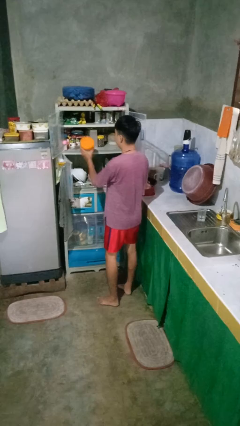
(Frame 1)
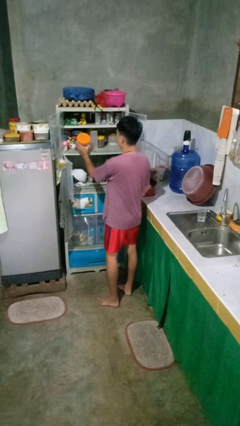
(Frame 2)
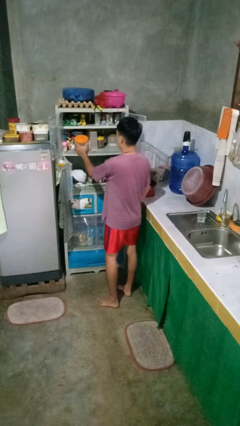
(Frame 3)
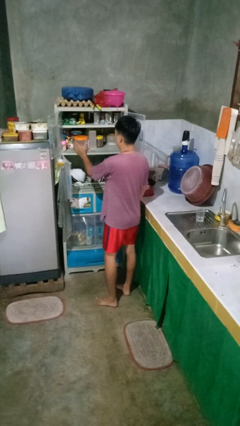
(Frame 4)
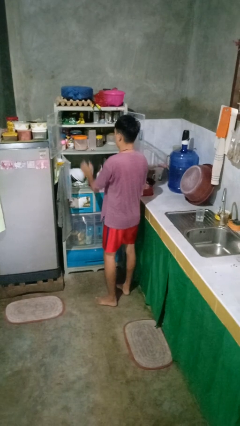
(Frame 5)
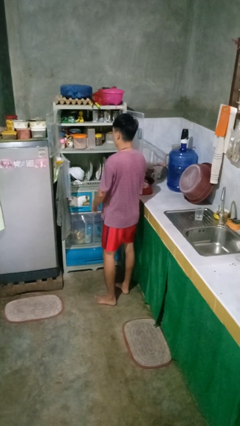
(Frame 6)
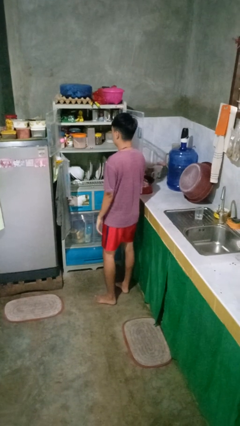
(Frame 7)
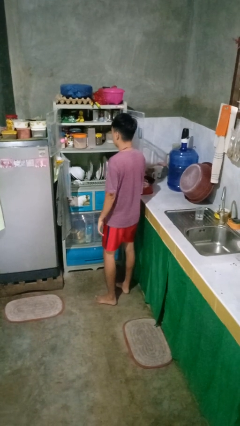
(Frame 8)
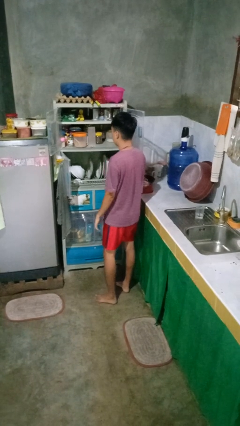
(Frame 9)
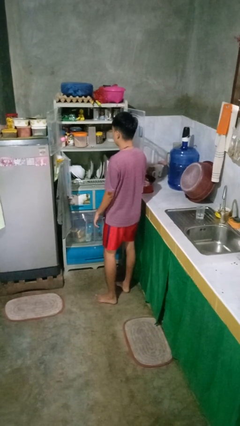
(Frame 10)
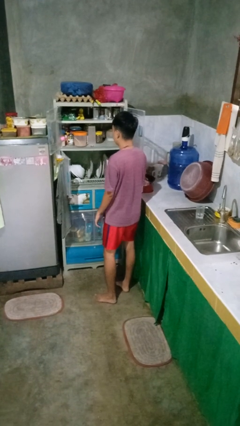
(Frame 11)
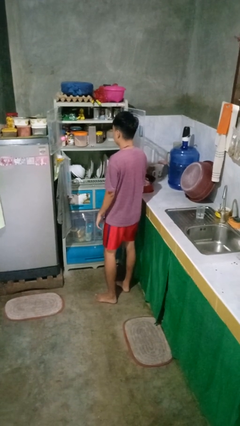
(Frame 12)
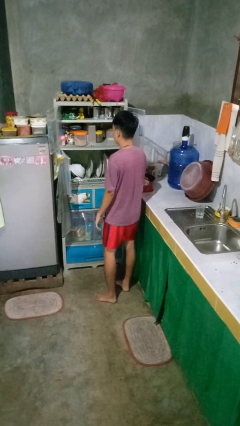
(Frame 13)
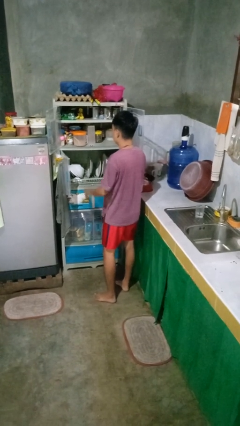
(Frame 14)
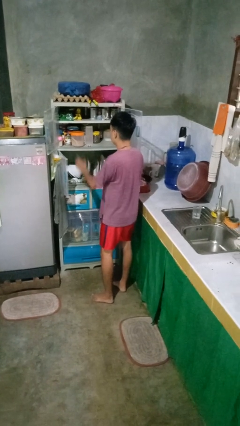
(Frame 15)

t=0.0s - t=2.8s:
person puts object in cabinet

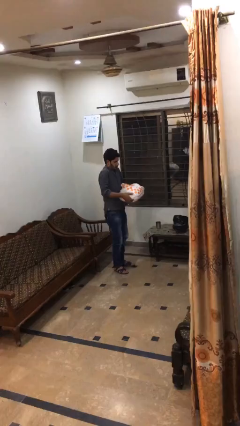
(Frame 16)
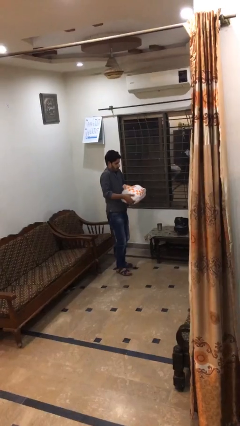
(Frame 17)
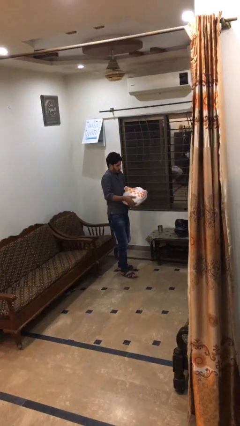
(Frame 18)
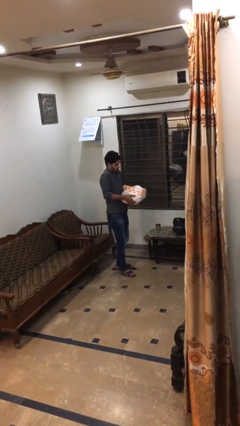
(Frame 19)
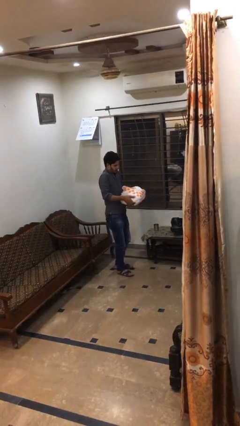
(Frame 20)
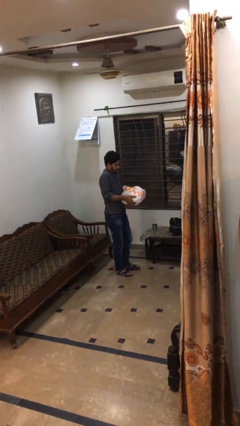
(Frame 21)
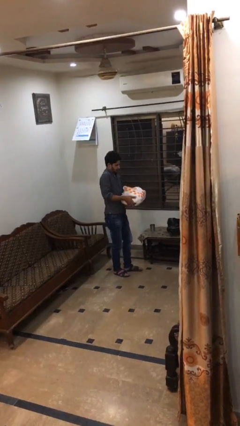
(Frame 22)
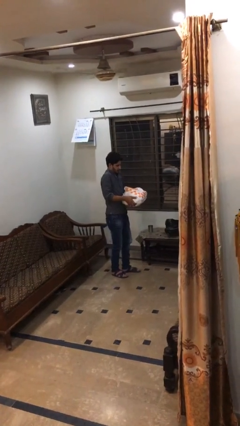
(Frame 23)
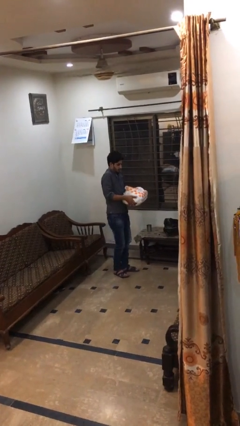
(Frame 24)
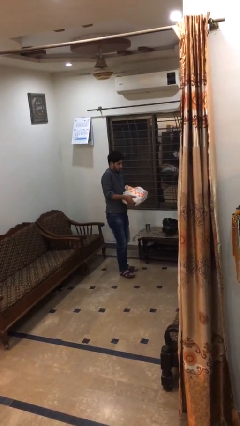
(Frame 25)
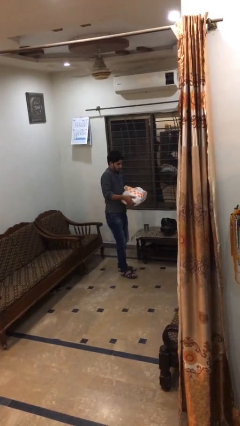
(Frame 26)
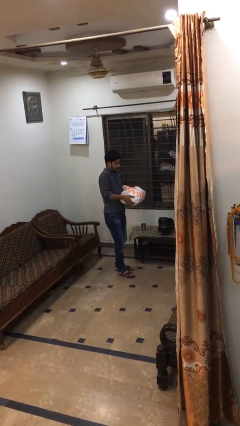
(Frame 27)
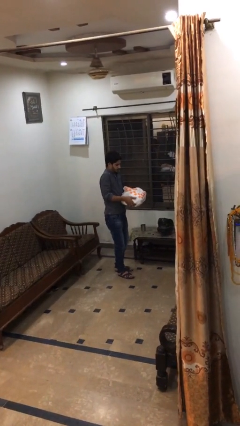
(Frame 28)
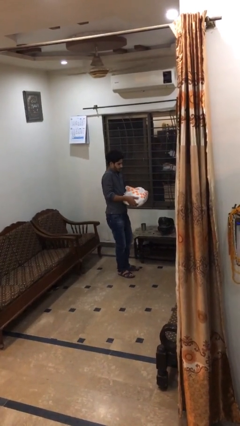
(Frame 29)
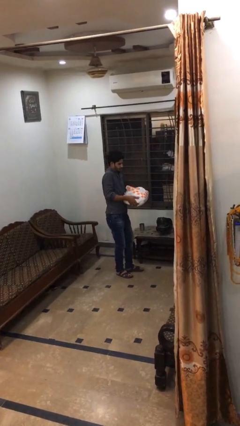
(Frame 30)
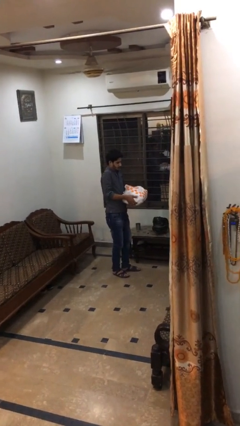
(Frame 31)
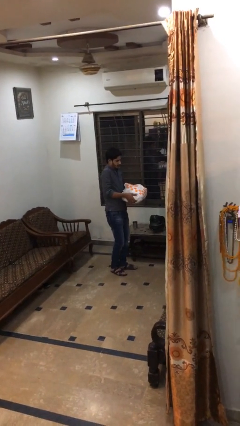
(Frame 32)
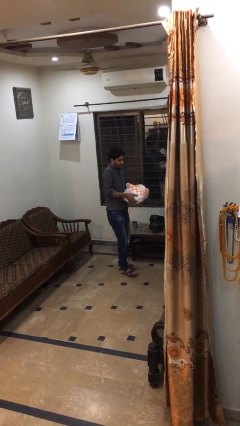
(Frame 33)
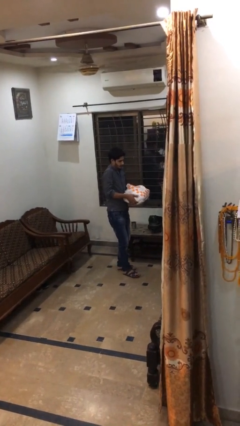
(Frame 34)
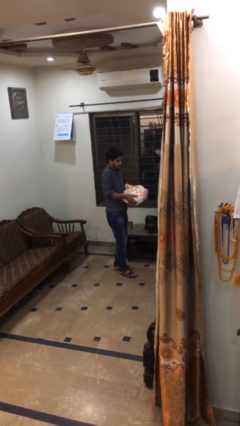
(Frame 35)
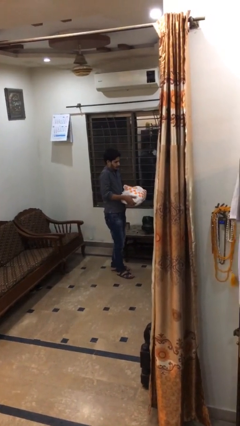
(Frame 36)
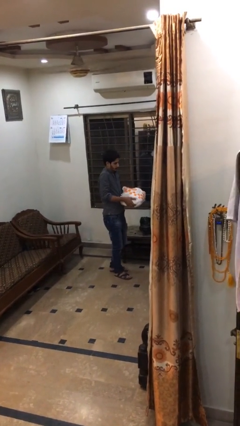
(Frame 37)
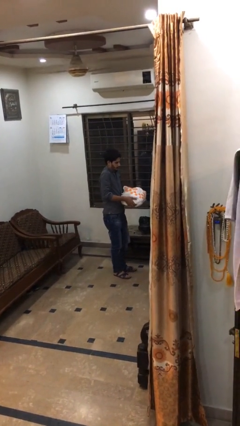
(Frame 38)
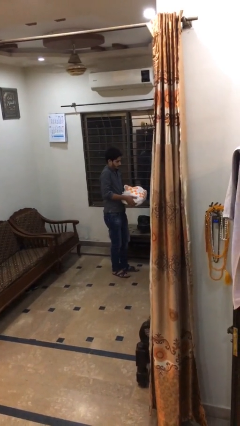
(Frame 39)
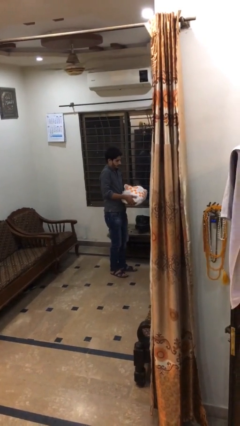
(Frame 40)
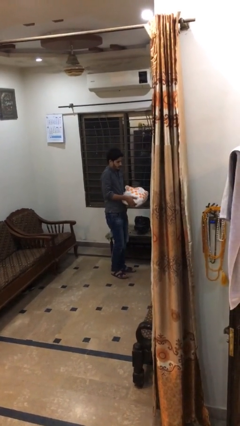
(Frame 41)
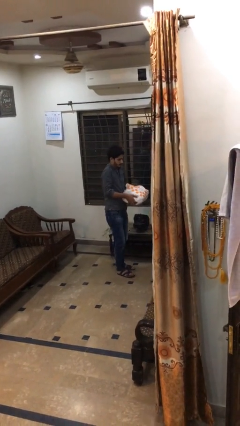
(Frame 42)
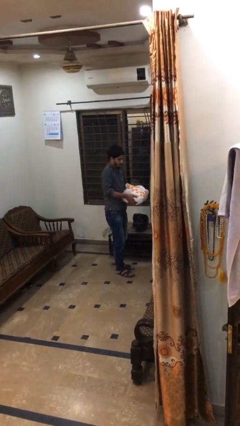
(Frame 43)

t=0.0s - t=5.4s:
person carries heavy object

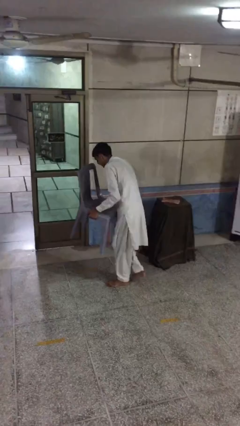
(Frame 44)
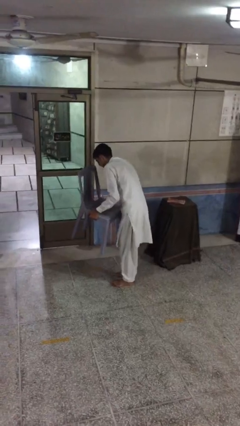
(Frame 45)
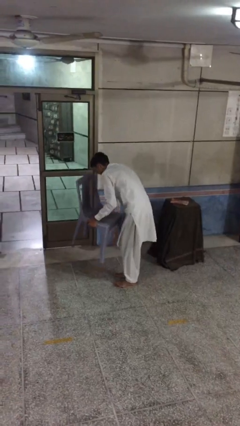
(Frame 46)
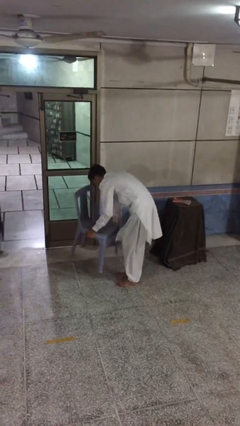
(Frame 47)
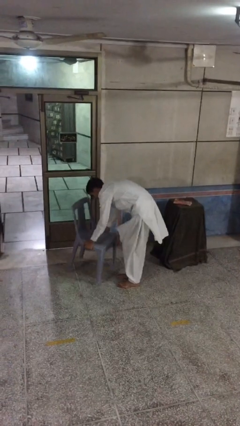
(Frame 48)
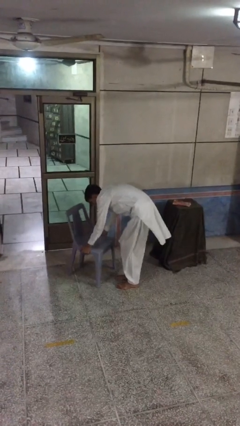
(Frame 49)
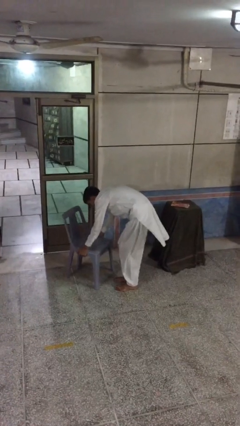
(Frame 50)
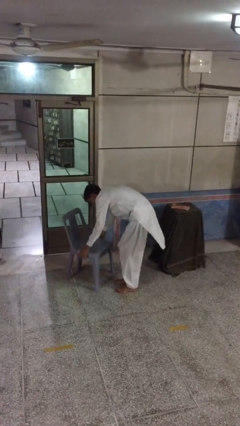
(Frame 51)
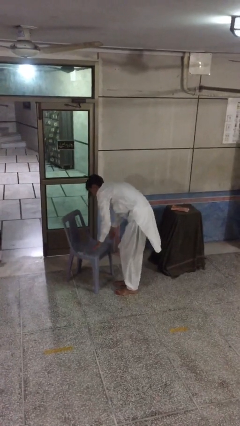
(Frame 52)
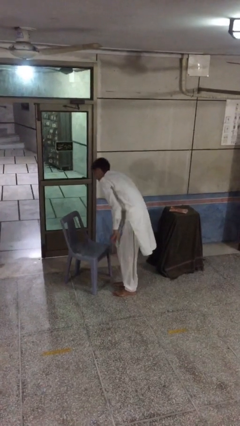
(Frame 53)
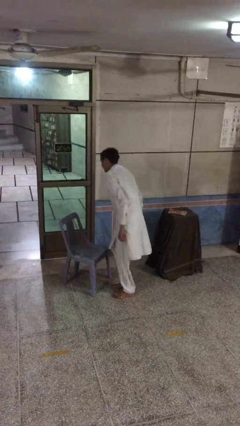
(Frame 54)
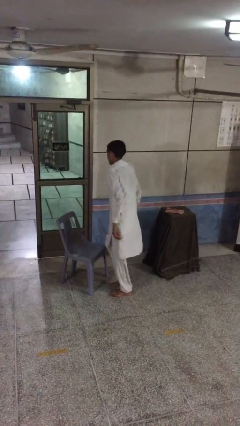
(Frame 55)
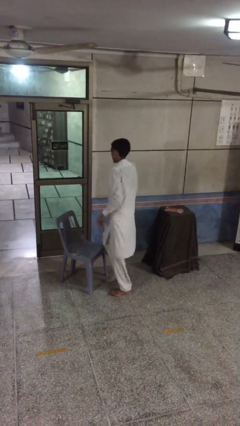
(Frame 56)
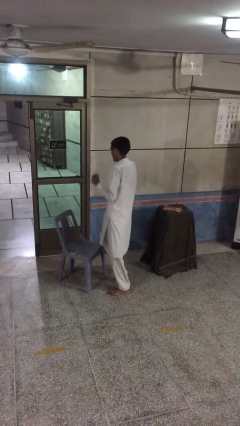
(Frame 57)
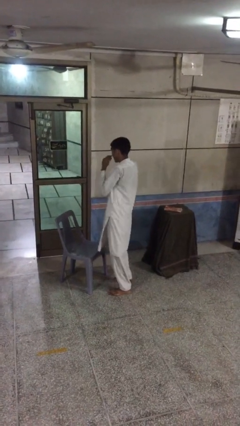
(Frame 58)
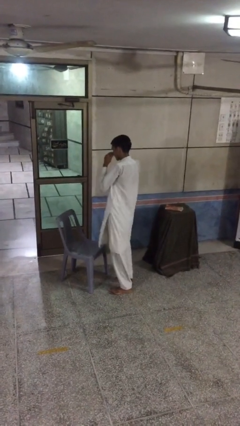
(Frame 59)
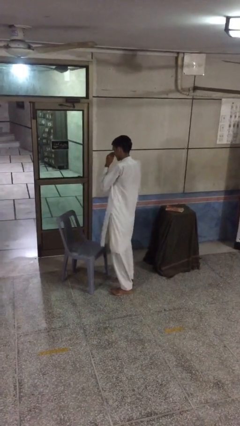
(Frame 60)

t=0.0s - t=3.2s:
person puts down object on floor

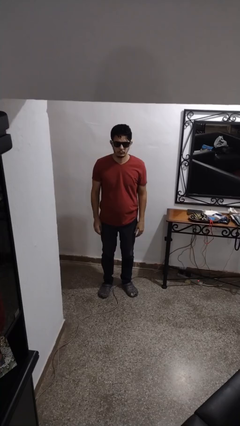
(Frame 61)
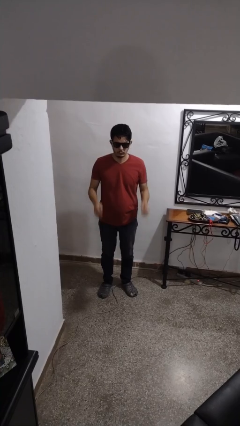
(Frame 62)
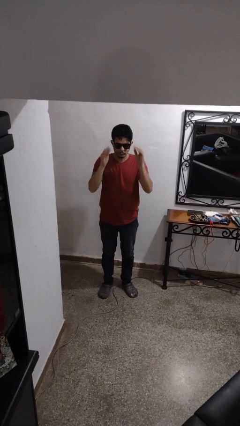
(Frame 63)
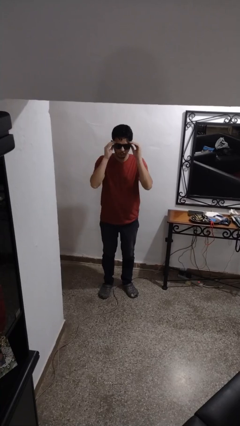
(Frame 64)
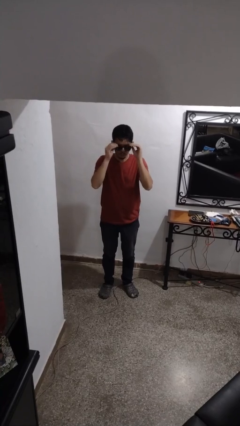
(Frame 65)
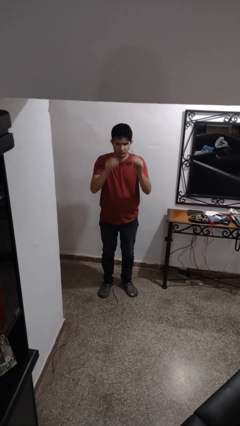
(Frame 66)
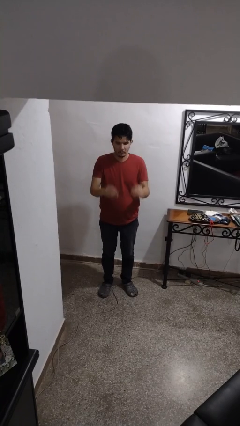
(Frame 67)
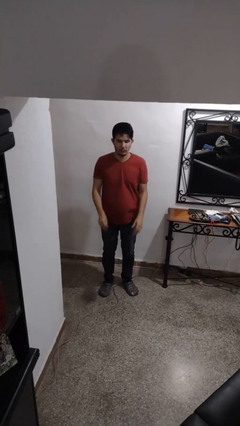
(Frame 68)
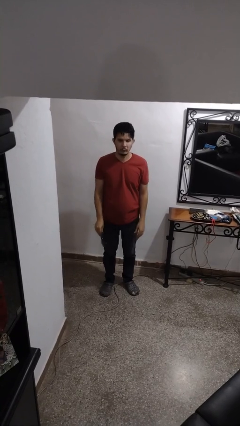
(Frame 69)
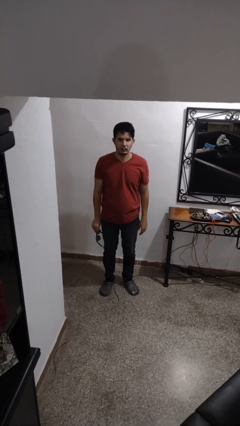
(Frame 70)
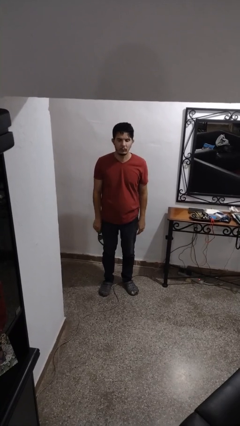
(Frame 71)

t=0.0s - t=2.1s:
person takes off sunglasses

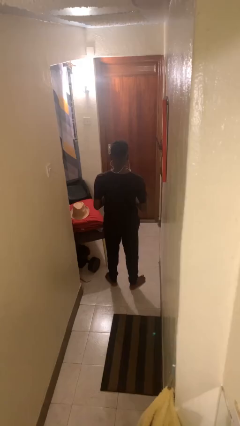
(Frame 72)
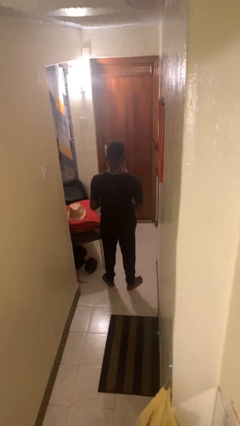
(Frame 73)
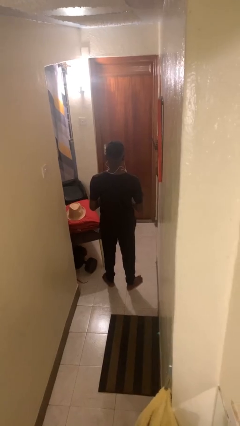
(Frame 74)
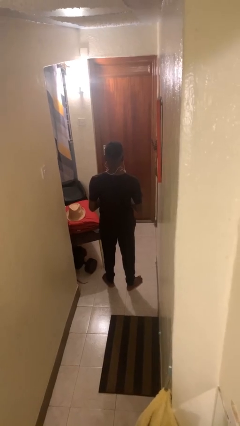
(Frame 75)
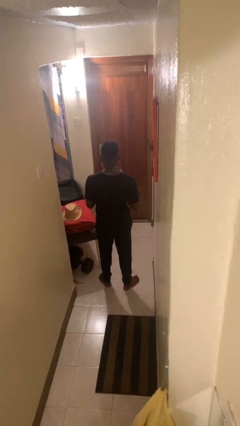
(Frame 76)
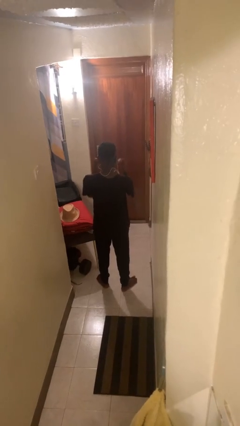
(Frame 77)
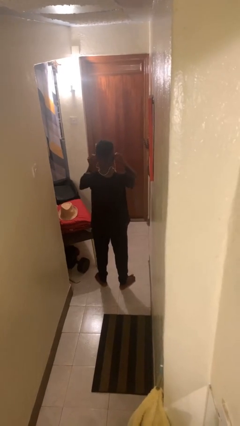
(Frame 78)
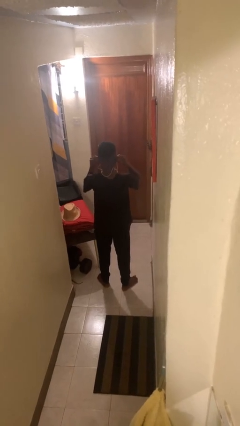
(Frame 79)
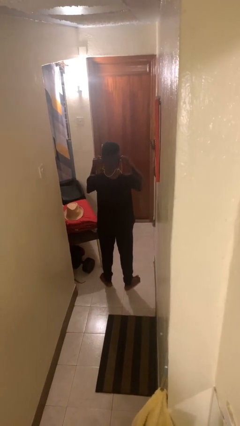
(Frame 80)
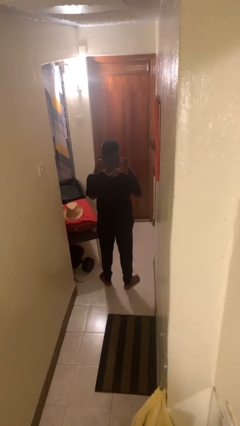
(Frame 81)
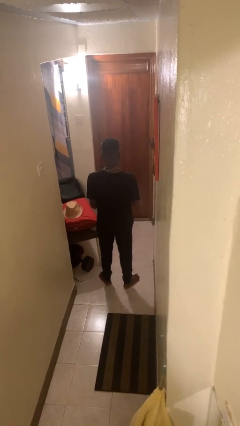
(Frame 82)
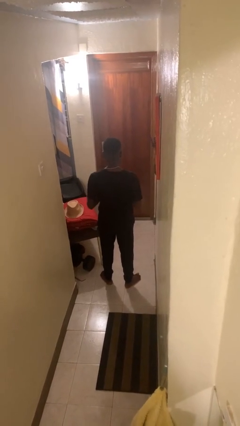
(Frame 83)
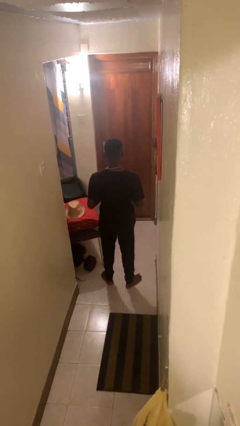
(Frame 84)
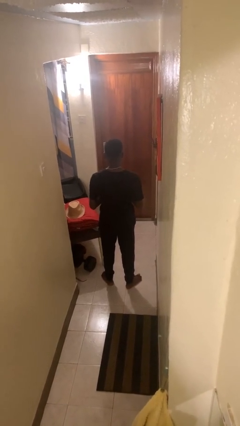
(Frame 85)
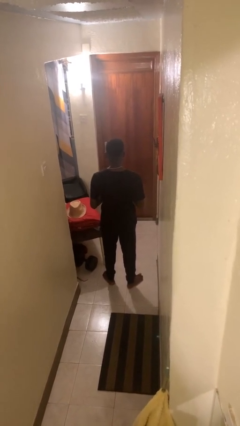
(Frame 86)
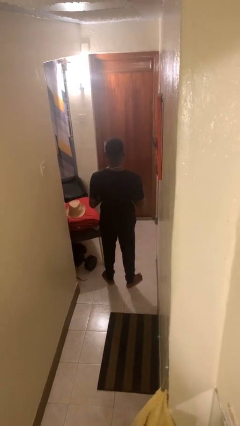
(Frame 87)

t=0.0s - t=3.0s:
person takes off headphones

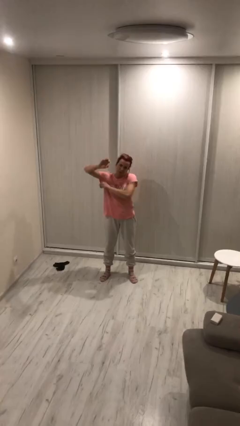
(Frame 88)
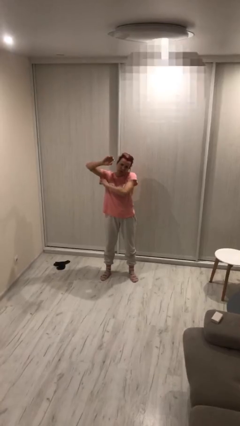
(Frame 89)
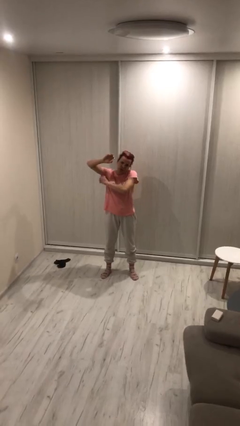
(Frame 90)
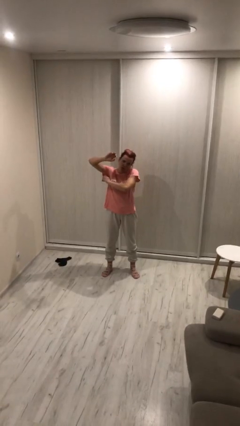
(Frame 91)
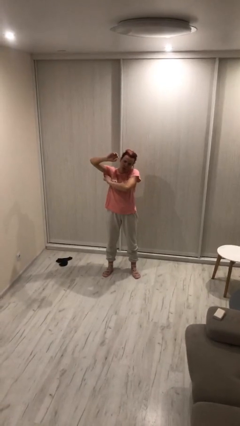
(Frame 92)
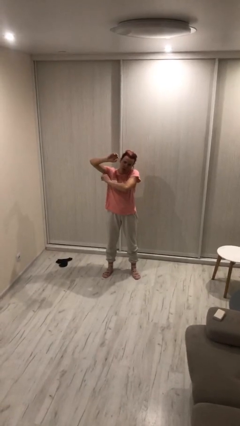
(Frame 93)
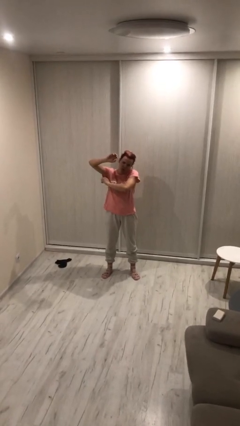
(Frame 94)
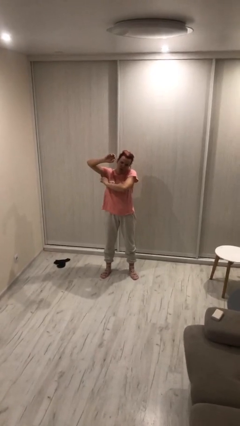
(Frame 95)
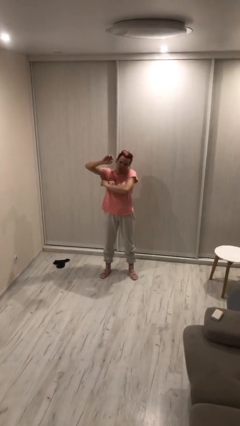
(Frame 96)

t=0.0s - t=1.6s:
person applies deodorant
